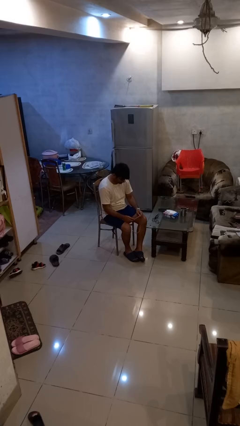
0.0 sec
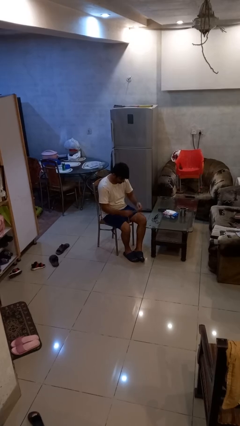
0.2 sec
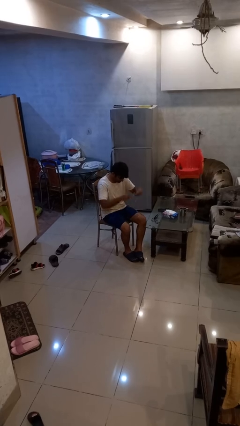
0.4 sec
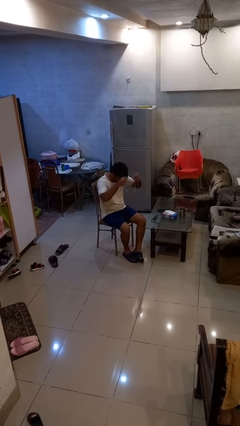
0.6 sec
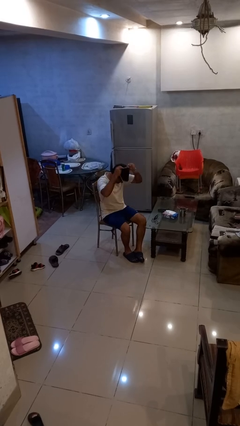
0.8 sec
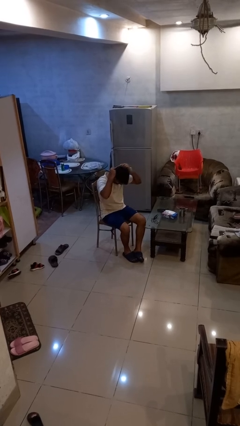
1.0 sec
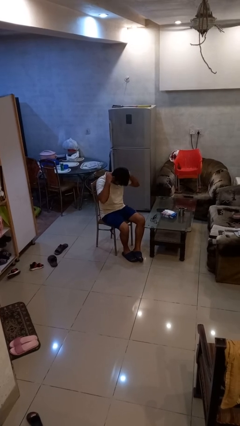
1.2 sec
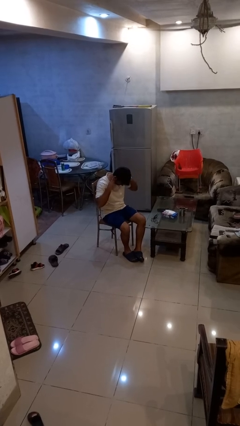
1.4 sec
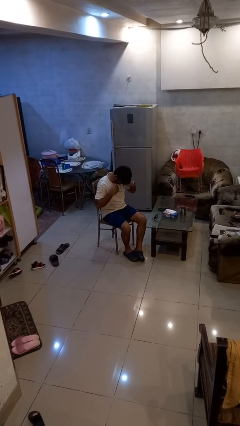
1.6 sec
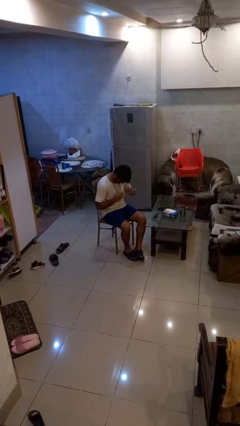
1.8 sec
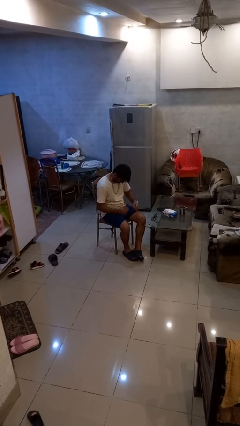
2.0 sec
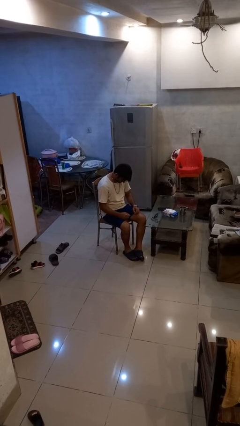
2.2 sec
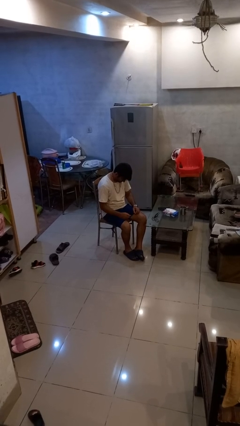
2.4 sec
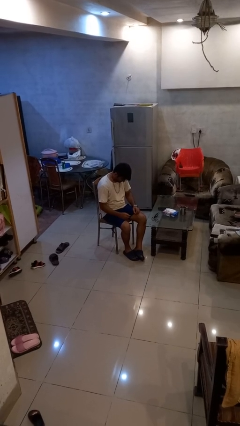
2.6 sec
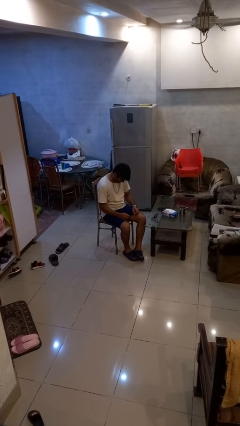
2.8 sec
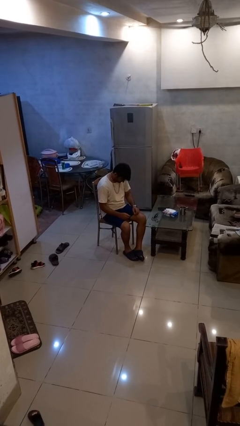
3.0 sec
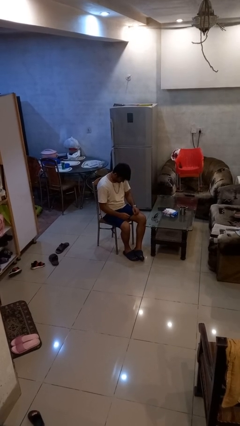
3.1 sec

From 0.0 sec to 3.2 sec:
person puts on necklace

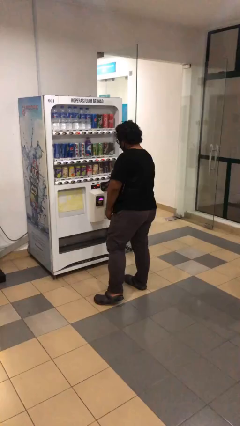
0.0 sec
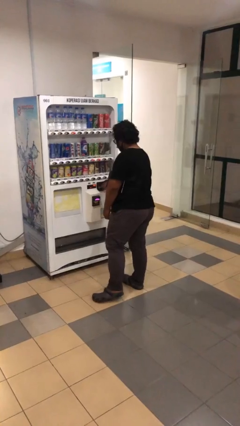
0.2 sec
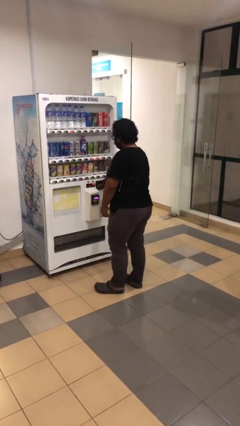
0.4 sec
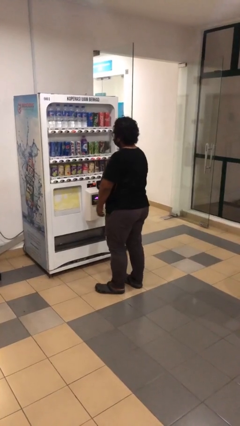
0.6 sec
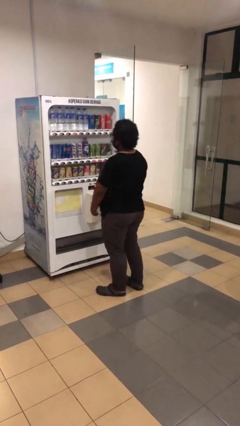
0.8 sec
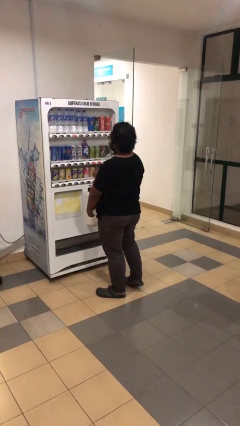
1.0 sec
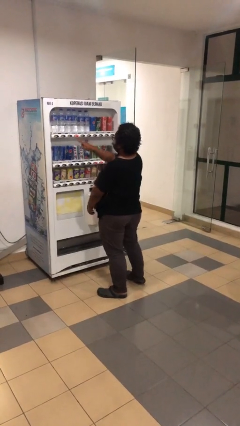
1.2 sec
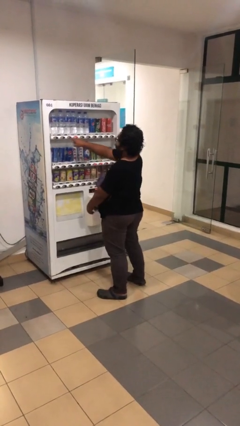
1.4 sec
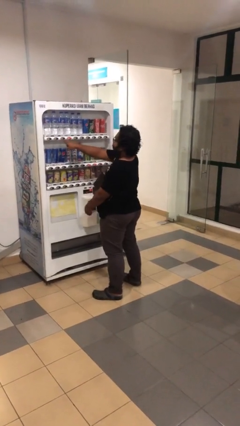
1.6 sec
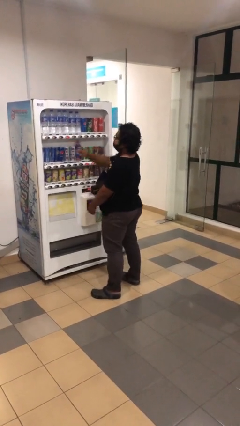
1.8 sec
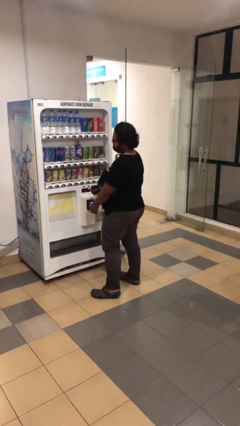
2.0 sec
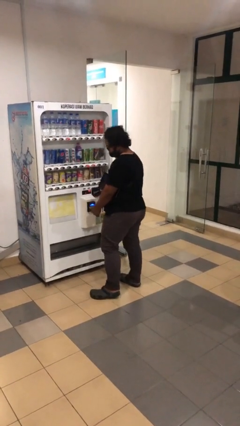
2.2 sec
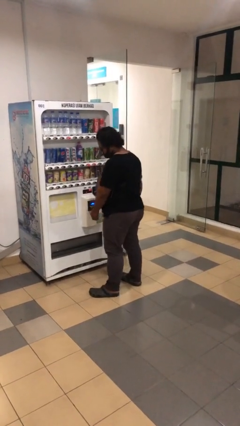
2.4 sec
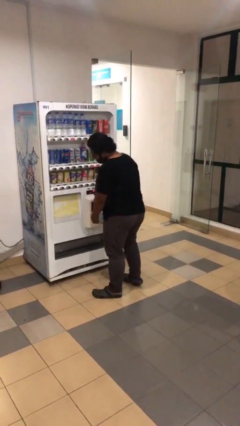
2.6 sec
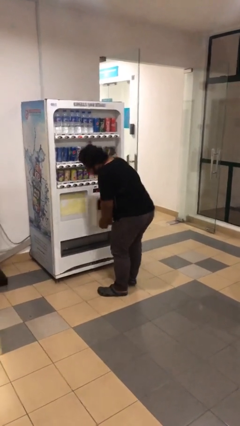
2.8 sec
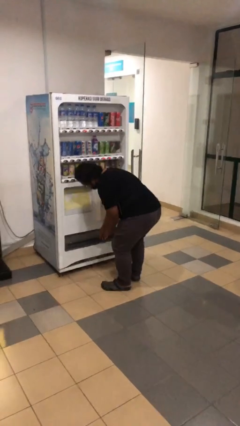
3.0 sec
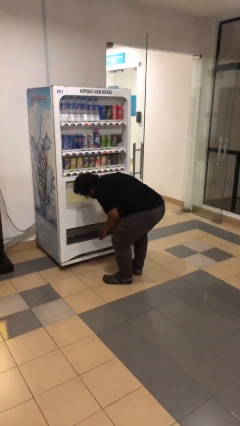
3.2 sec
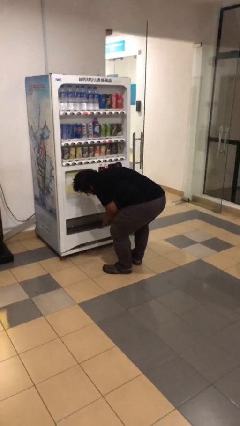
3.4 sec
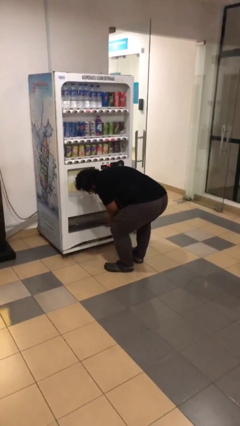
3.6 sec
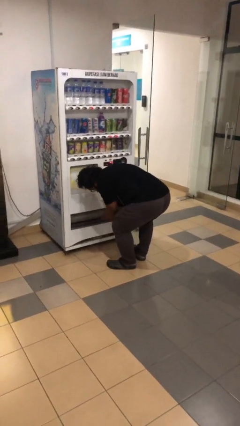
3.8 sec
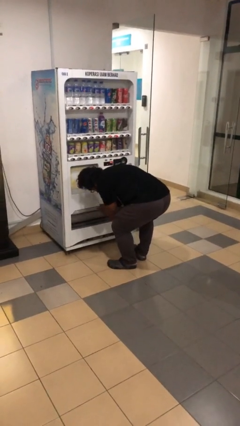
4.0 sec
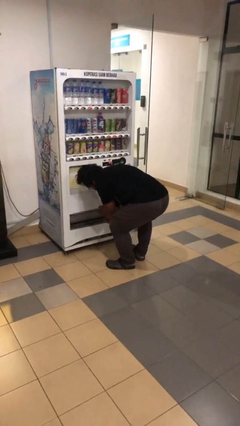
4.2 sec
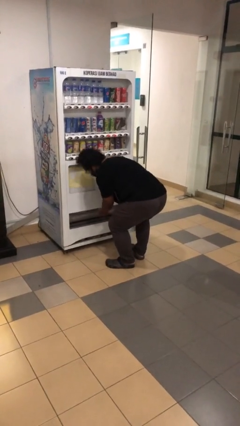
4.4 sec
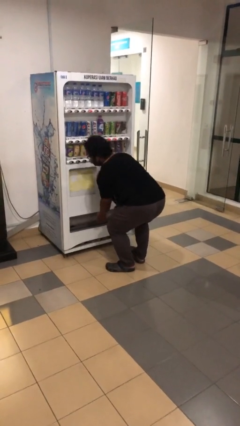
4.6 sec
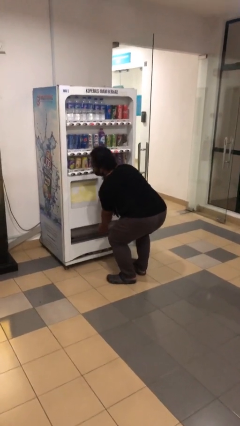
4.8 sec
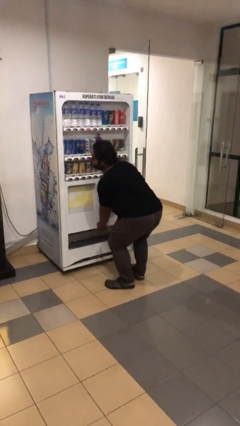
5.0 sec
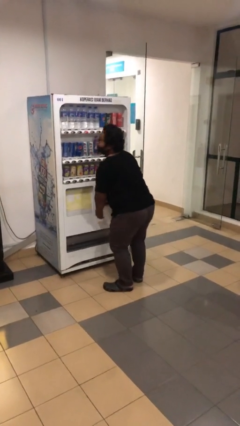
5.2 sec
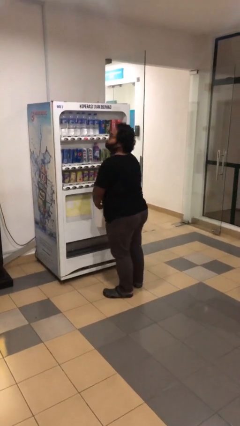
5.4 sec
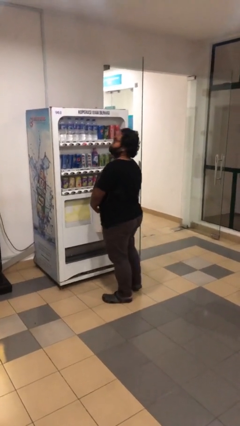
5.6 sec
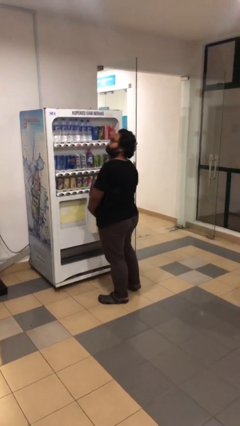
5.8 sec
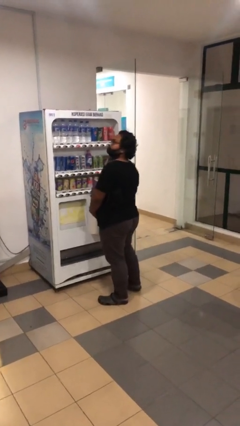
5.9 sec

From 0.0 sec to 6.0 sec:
person purchases from machine

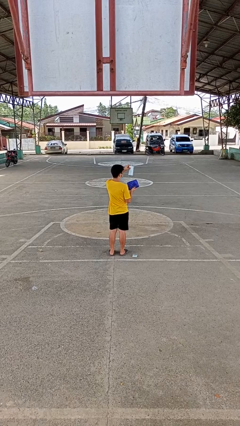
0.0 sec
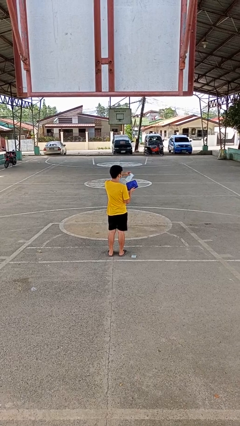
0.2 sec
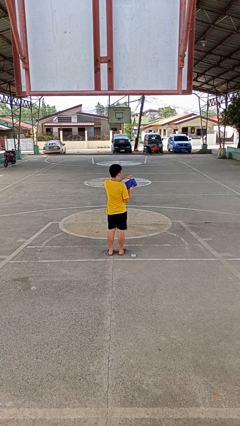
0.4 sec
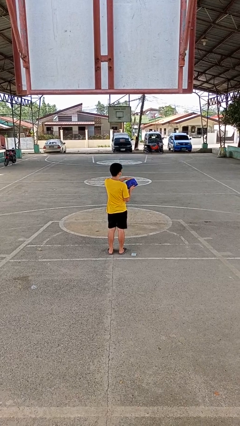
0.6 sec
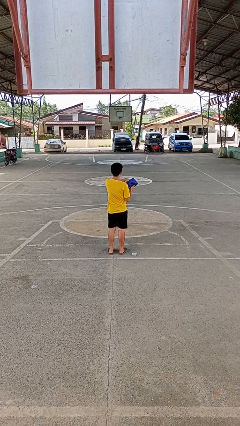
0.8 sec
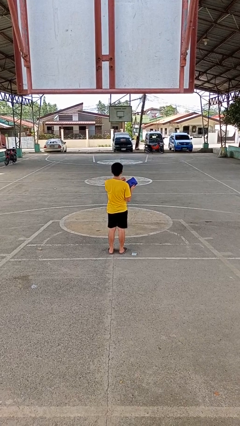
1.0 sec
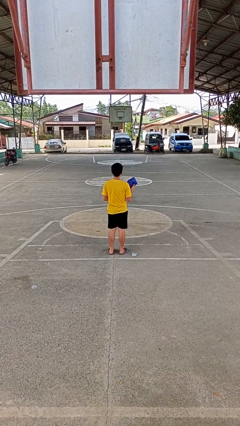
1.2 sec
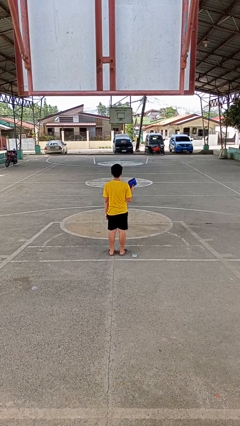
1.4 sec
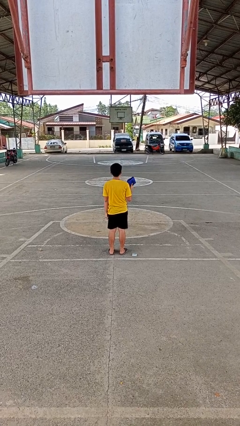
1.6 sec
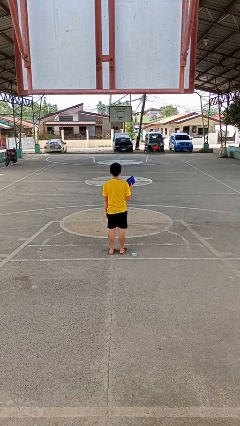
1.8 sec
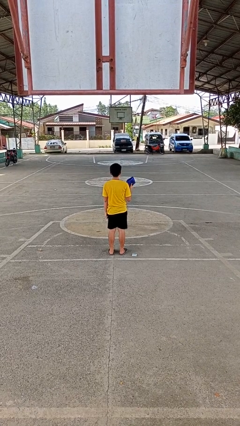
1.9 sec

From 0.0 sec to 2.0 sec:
person puts object into purse

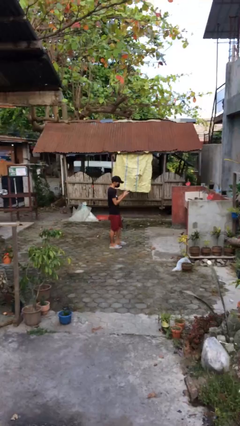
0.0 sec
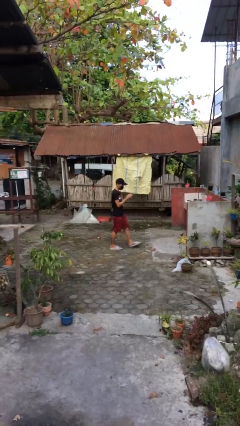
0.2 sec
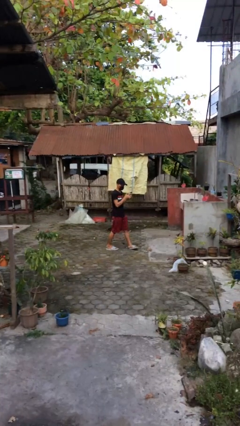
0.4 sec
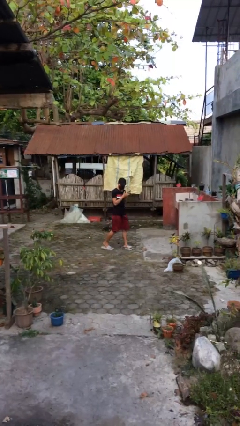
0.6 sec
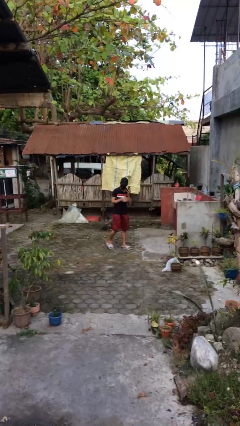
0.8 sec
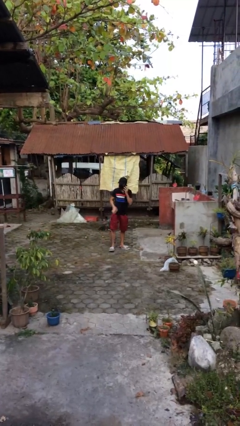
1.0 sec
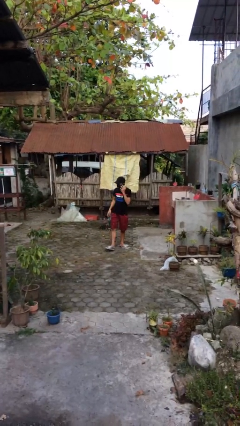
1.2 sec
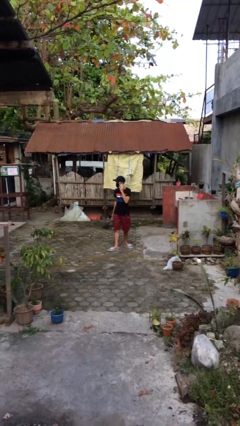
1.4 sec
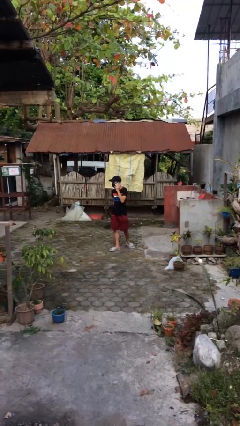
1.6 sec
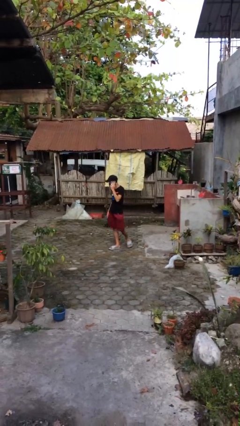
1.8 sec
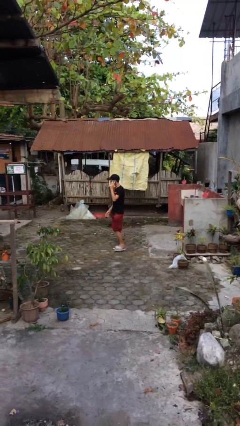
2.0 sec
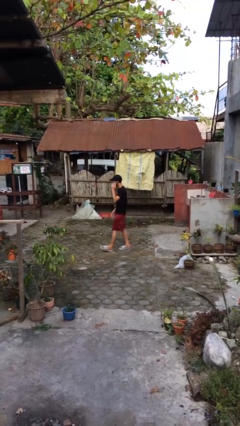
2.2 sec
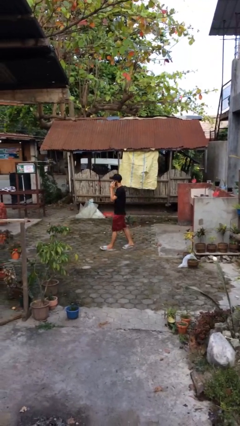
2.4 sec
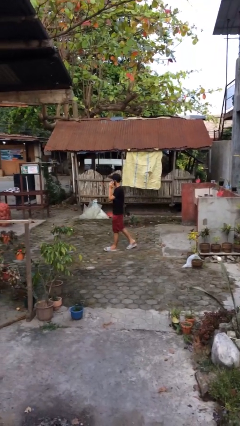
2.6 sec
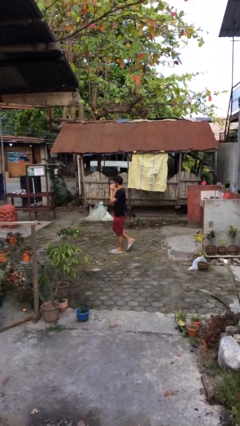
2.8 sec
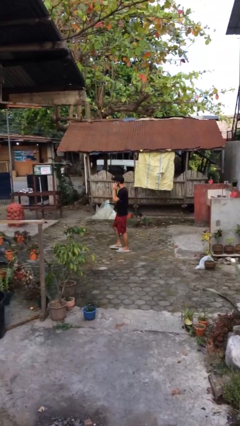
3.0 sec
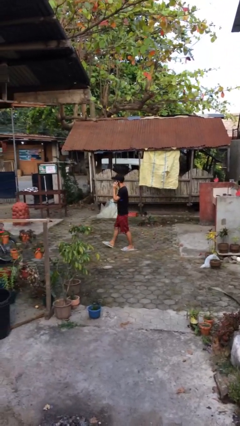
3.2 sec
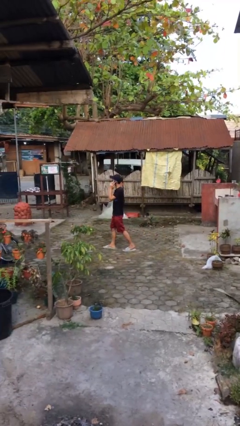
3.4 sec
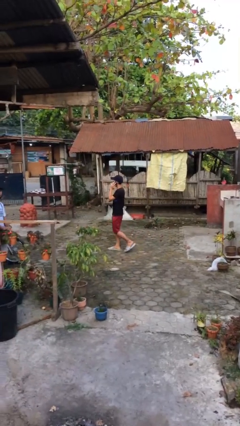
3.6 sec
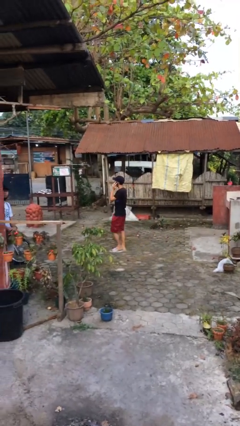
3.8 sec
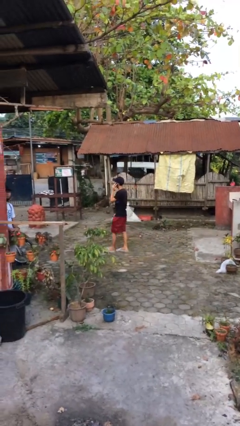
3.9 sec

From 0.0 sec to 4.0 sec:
person talks on phone

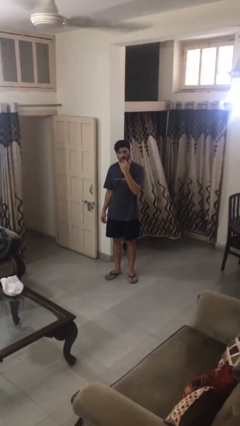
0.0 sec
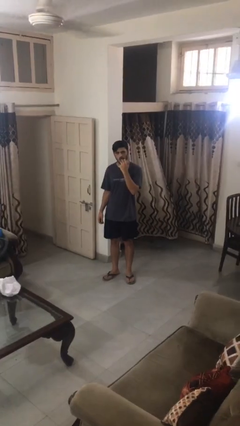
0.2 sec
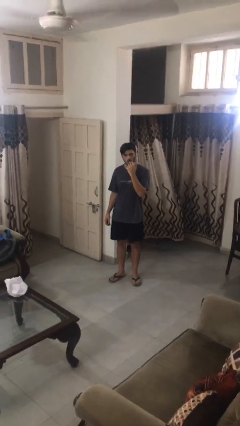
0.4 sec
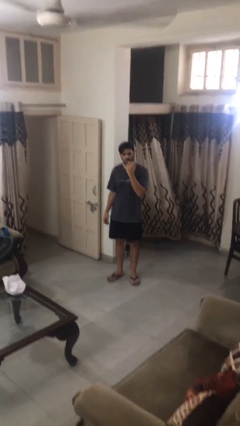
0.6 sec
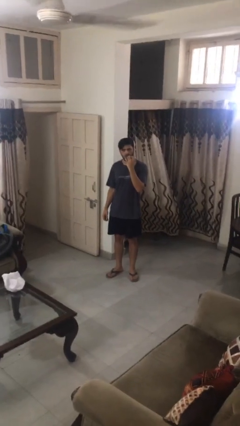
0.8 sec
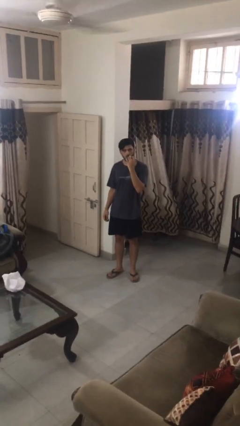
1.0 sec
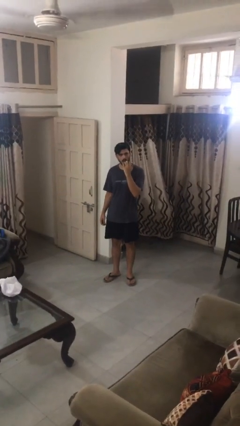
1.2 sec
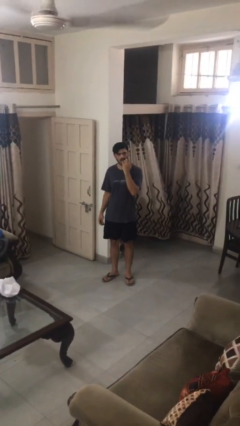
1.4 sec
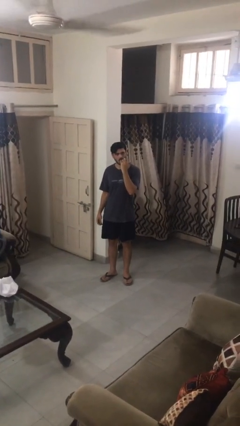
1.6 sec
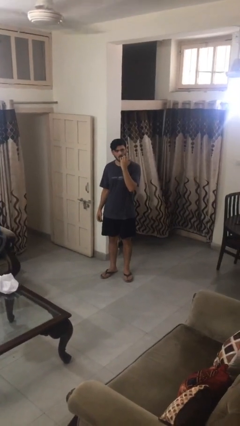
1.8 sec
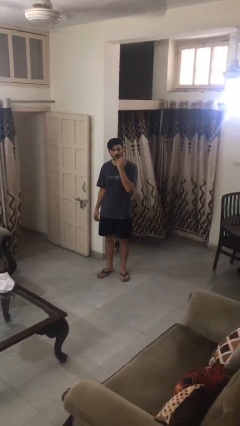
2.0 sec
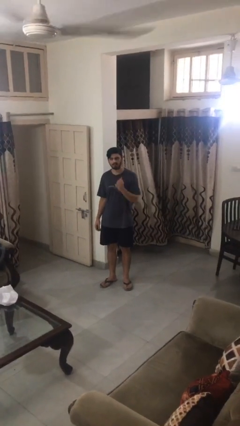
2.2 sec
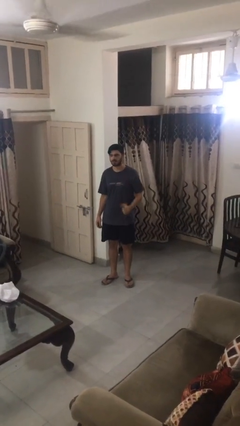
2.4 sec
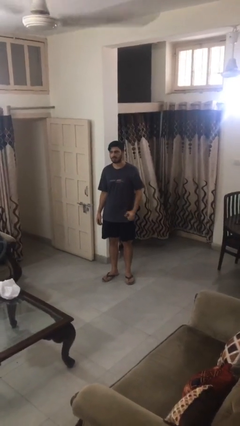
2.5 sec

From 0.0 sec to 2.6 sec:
person licks fingers
